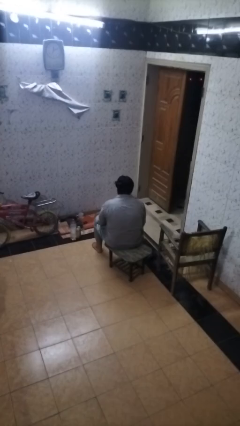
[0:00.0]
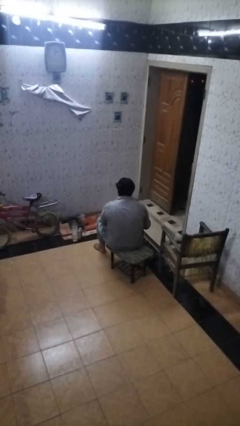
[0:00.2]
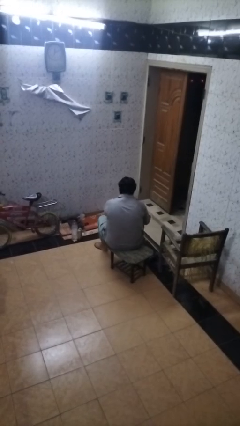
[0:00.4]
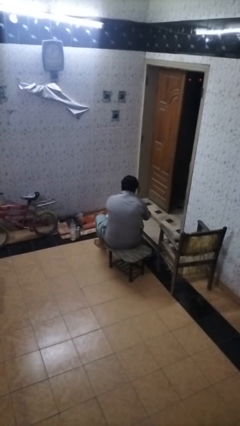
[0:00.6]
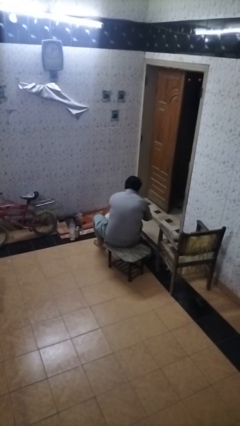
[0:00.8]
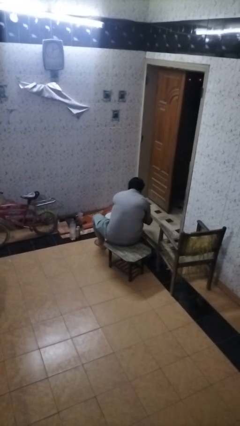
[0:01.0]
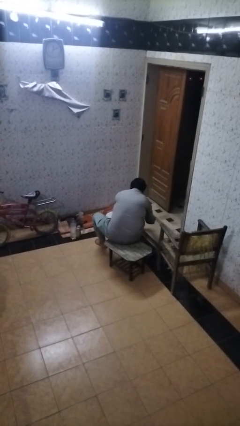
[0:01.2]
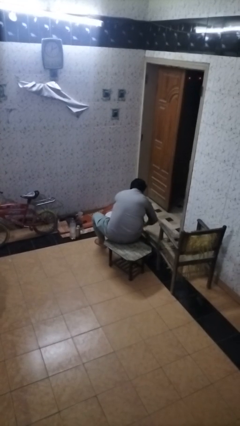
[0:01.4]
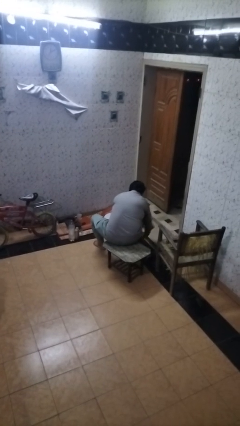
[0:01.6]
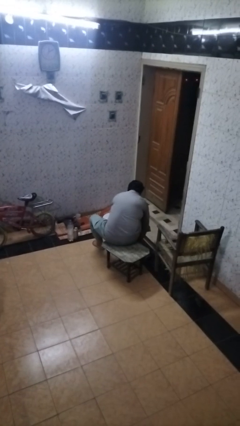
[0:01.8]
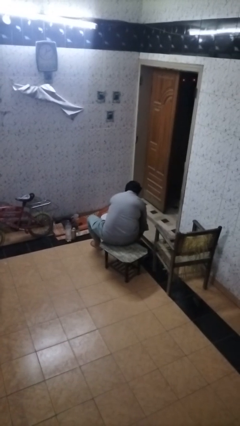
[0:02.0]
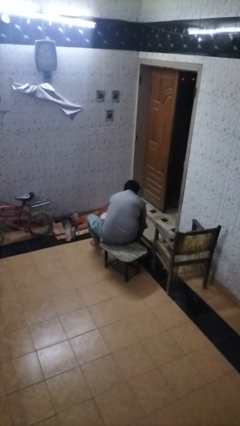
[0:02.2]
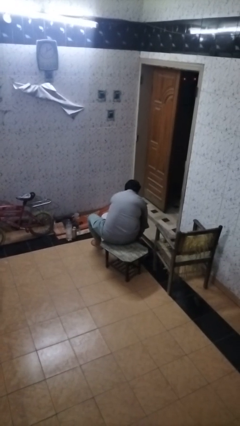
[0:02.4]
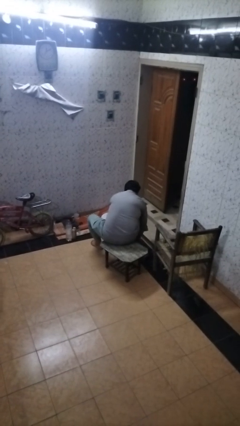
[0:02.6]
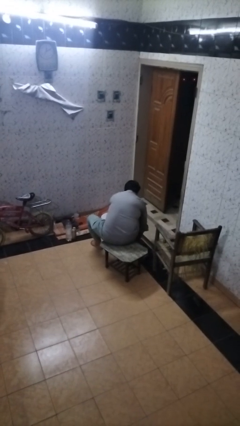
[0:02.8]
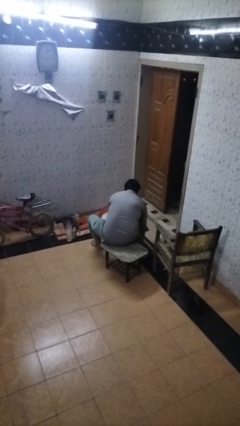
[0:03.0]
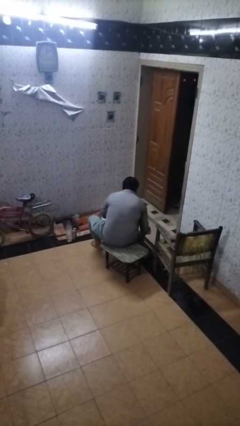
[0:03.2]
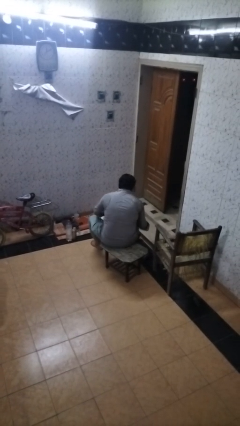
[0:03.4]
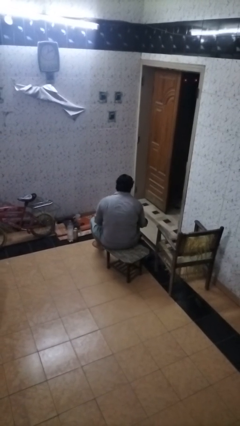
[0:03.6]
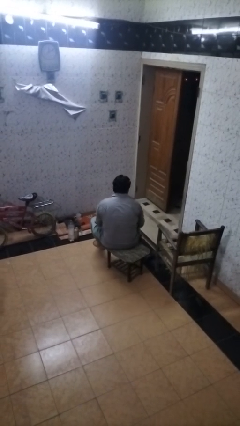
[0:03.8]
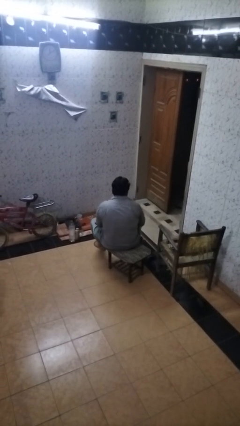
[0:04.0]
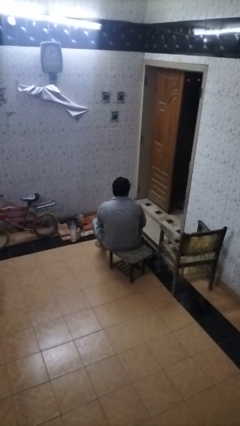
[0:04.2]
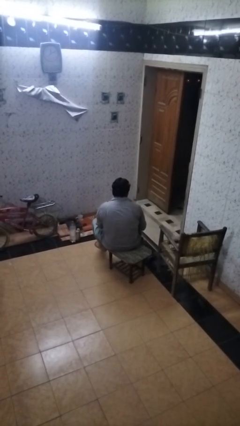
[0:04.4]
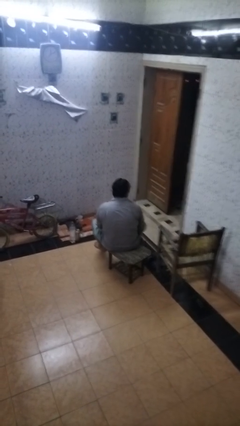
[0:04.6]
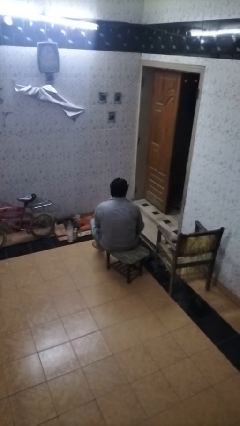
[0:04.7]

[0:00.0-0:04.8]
person puts on socks

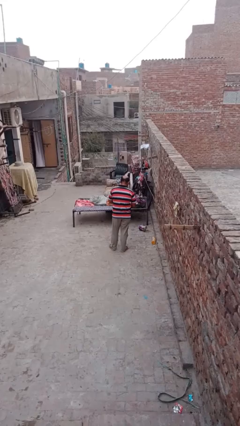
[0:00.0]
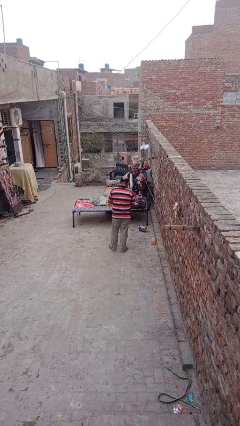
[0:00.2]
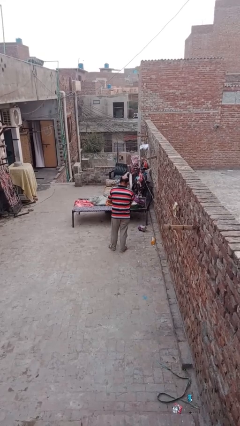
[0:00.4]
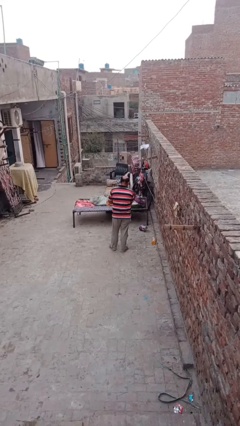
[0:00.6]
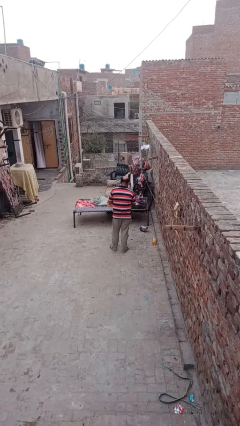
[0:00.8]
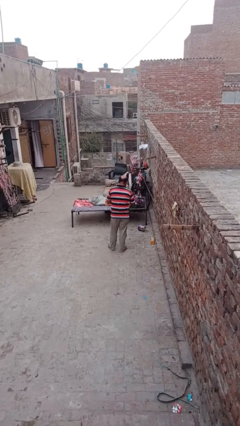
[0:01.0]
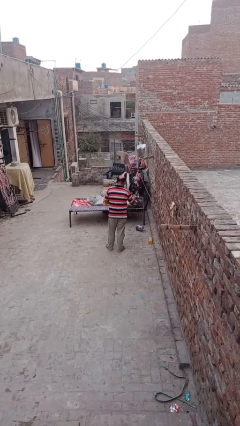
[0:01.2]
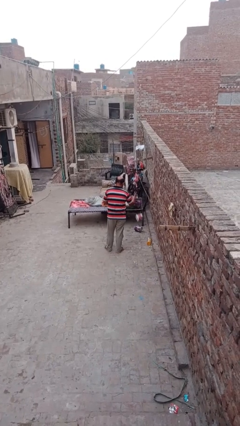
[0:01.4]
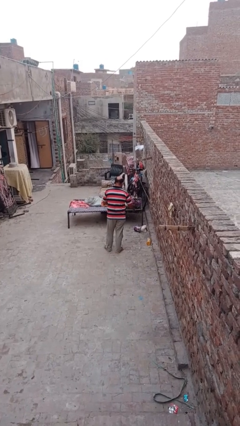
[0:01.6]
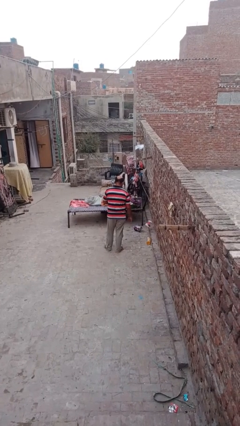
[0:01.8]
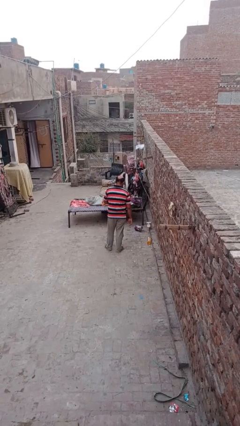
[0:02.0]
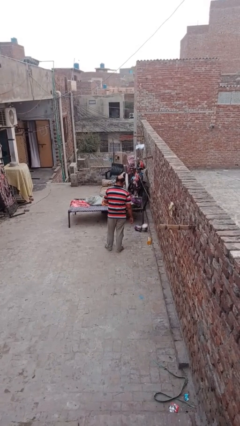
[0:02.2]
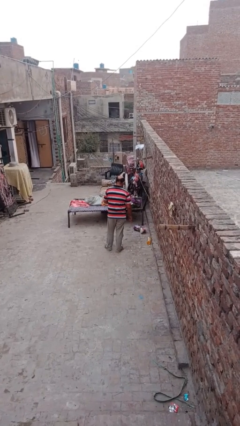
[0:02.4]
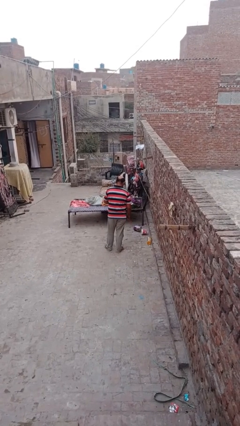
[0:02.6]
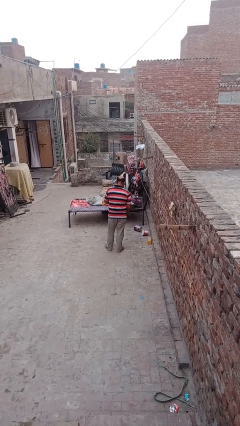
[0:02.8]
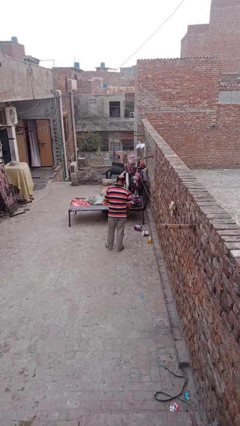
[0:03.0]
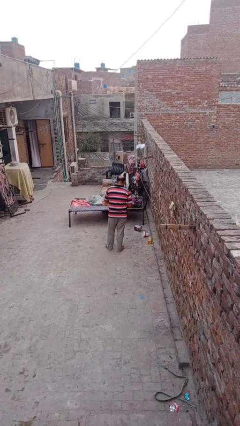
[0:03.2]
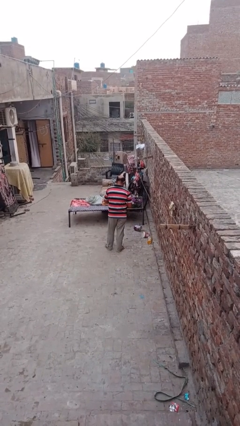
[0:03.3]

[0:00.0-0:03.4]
person discards trash

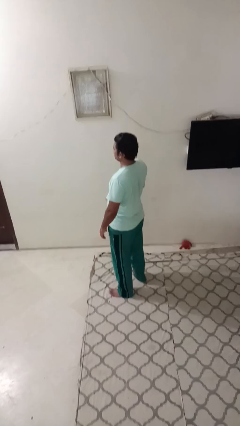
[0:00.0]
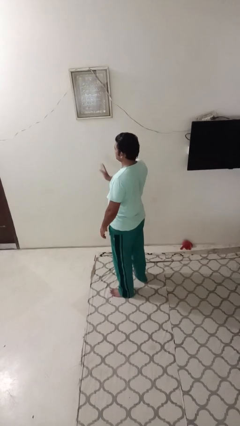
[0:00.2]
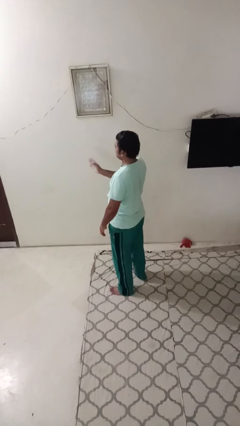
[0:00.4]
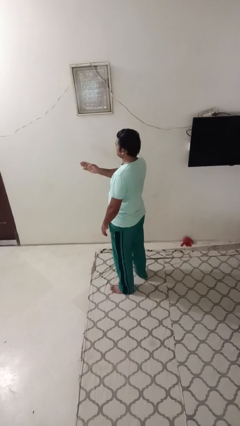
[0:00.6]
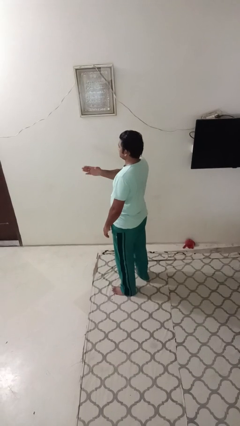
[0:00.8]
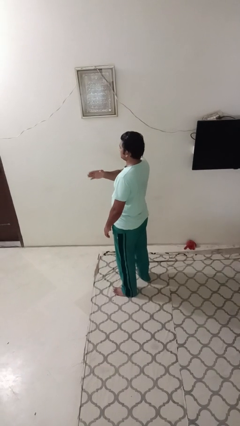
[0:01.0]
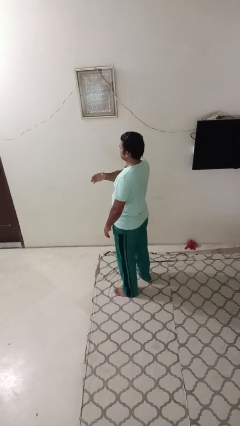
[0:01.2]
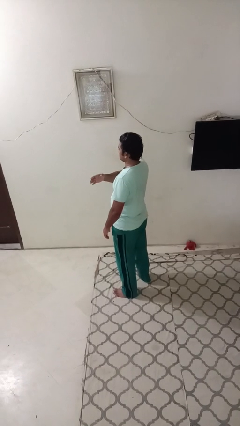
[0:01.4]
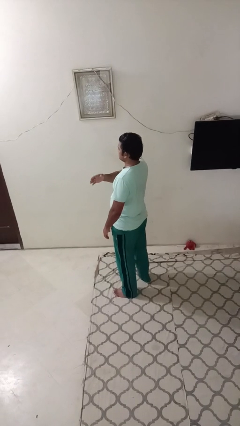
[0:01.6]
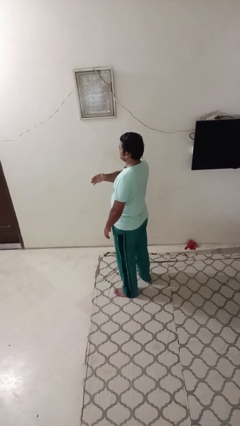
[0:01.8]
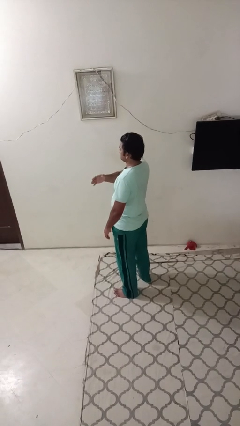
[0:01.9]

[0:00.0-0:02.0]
person gestures swipe left

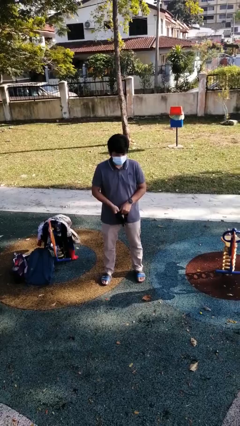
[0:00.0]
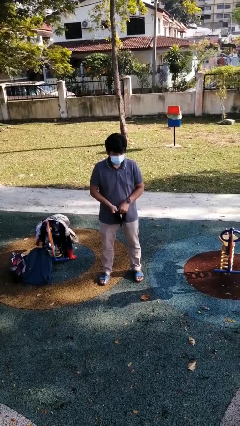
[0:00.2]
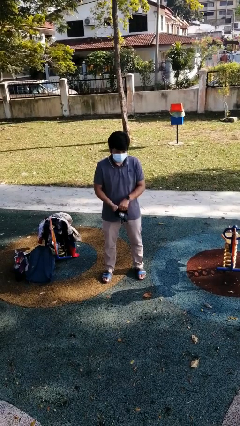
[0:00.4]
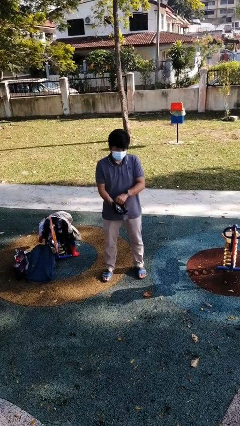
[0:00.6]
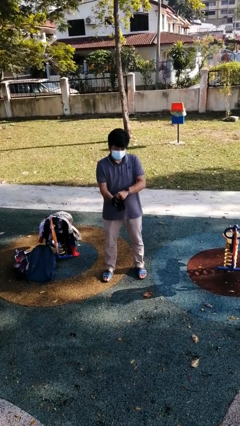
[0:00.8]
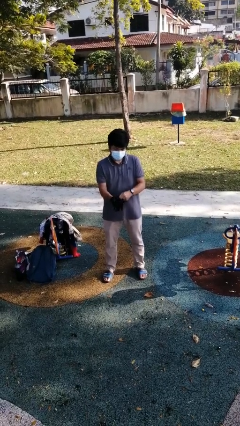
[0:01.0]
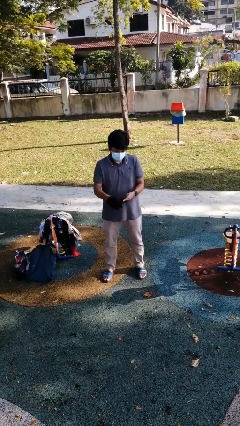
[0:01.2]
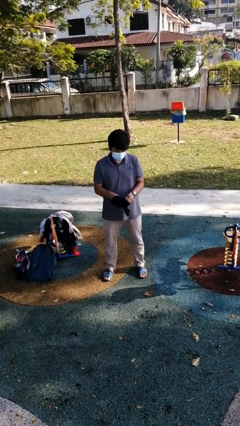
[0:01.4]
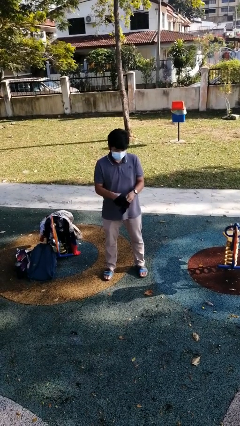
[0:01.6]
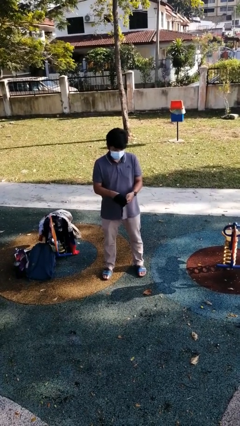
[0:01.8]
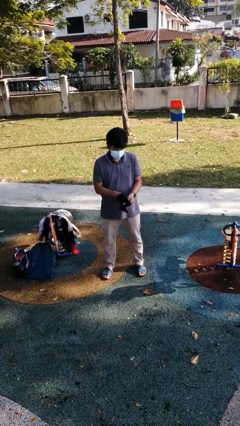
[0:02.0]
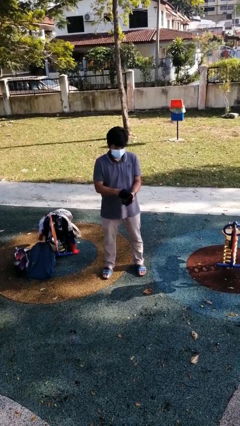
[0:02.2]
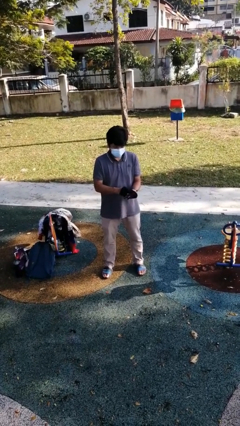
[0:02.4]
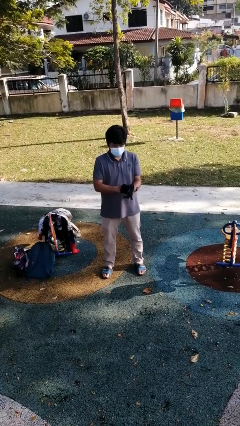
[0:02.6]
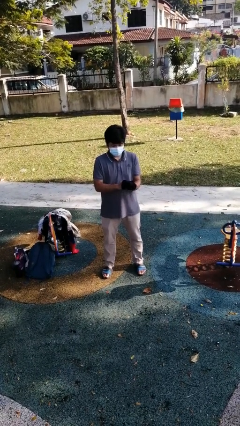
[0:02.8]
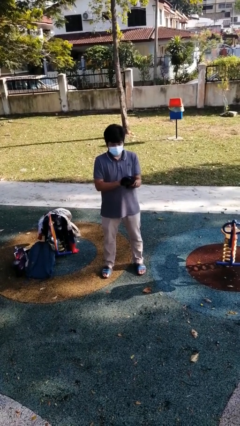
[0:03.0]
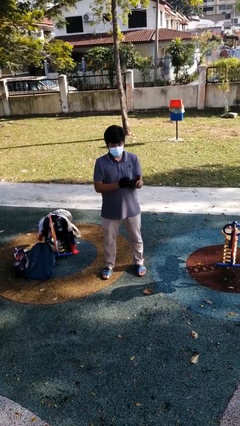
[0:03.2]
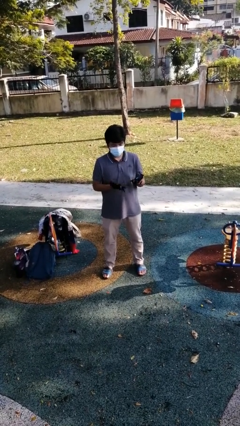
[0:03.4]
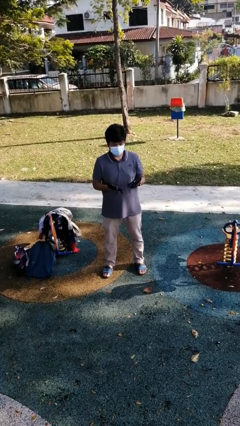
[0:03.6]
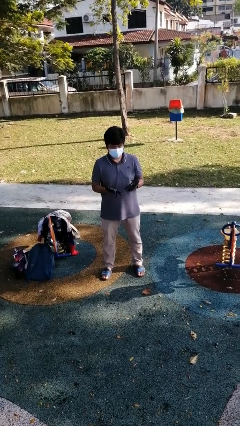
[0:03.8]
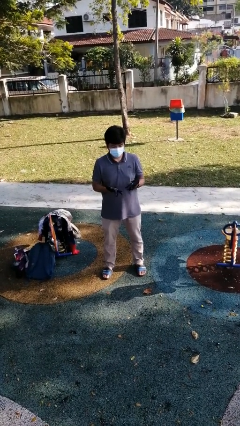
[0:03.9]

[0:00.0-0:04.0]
person puts on gloves

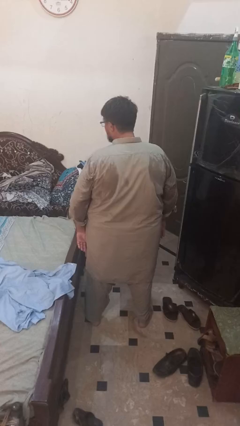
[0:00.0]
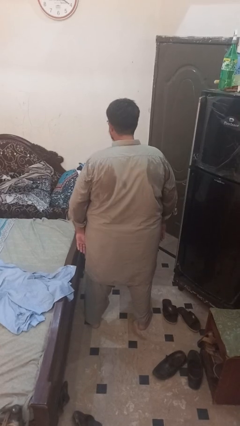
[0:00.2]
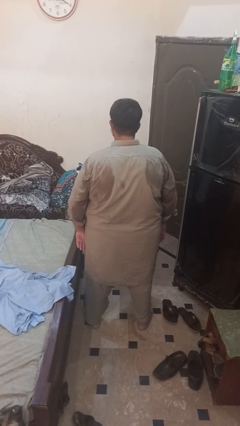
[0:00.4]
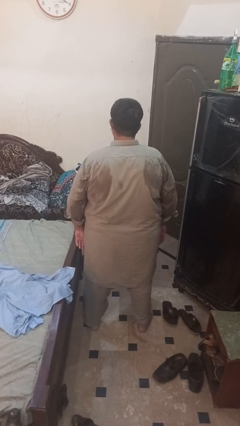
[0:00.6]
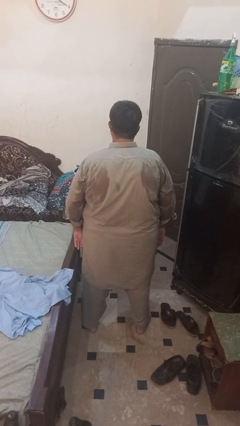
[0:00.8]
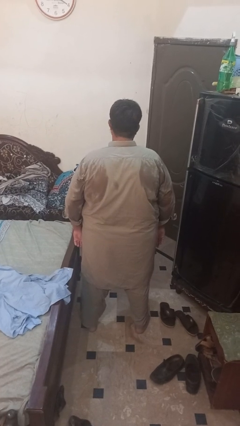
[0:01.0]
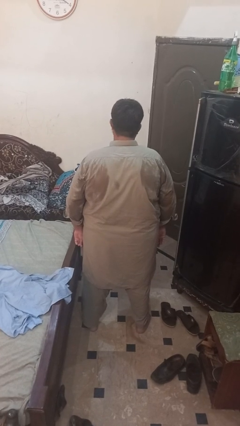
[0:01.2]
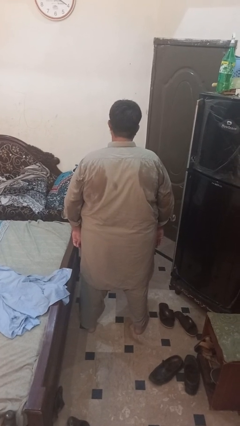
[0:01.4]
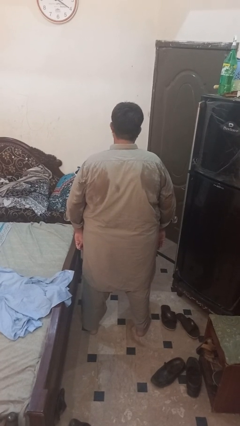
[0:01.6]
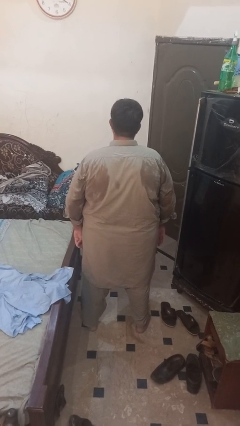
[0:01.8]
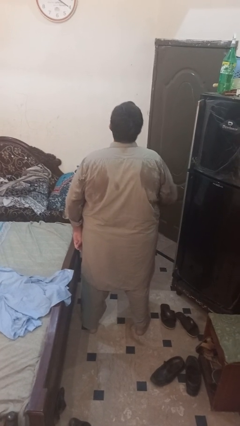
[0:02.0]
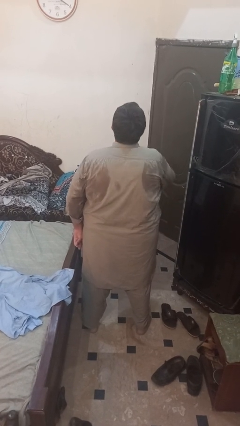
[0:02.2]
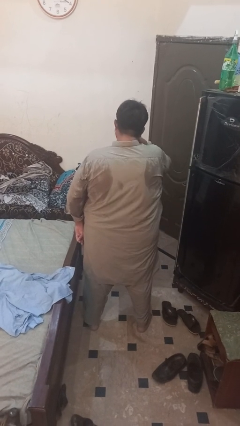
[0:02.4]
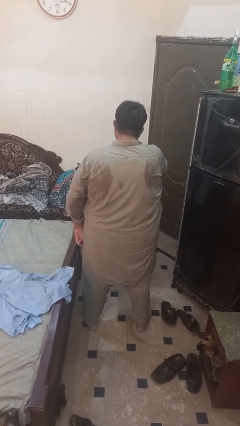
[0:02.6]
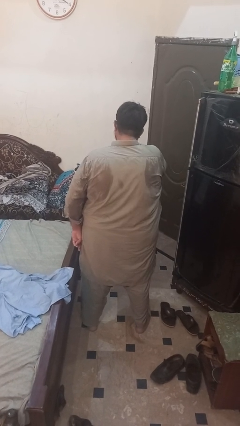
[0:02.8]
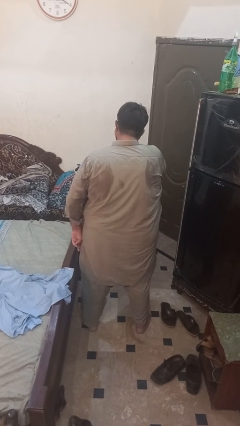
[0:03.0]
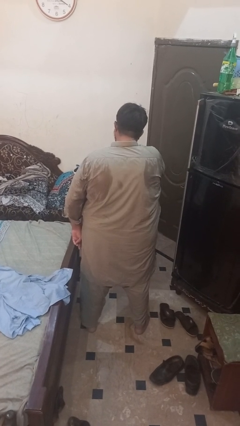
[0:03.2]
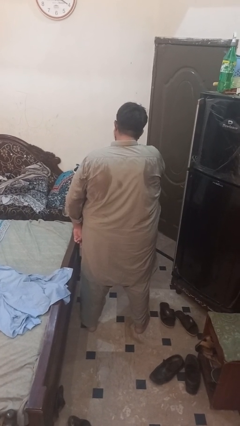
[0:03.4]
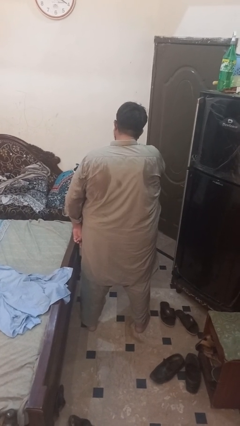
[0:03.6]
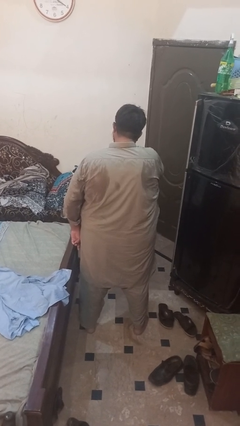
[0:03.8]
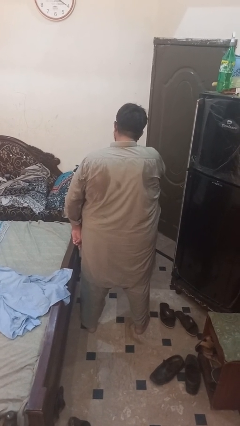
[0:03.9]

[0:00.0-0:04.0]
person sneezes into hand
